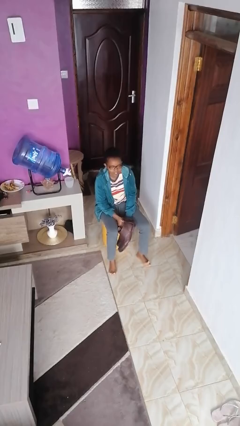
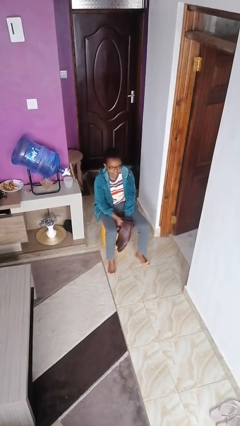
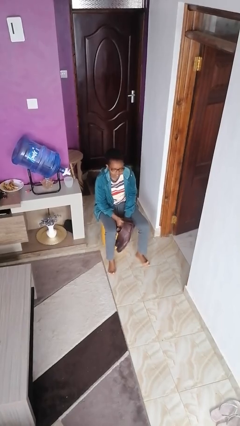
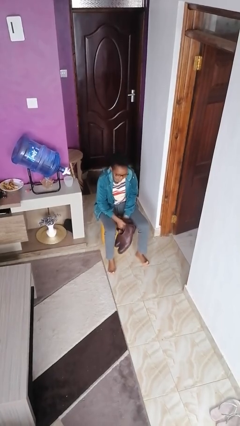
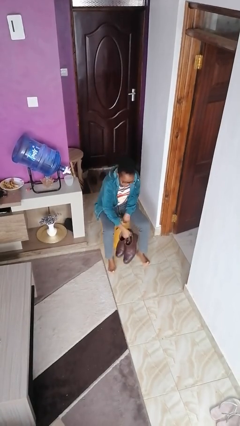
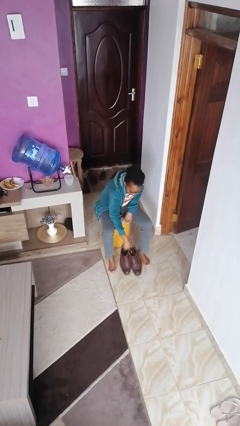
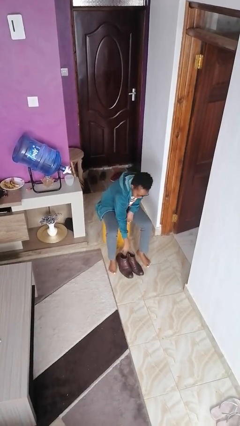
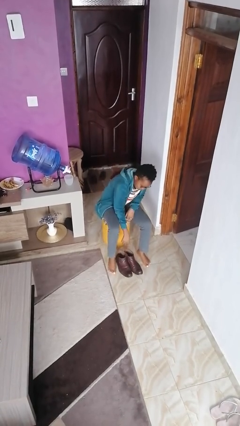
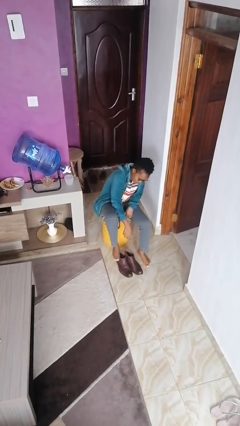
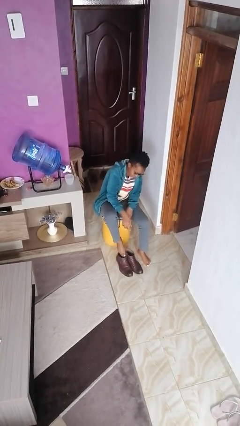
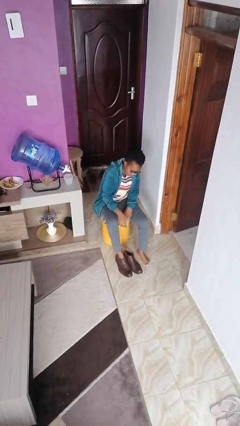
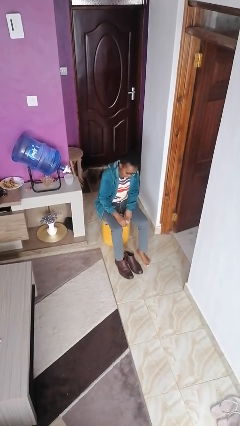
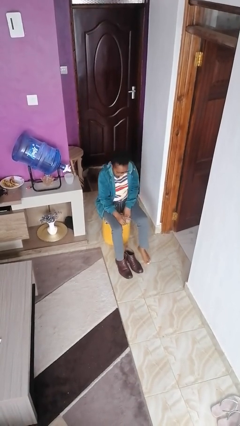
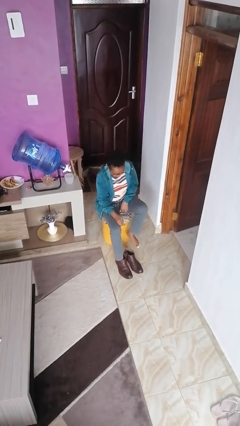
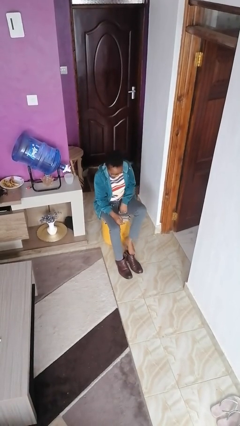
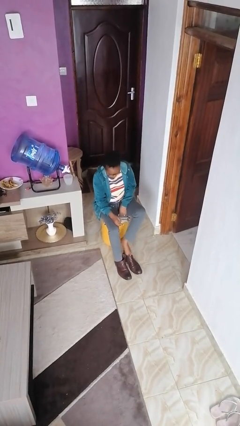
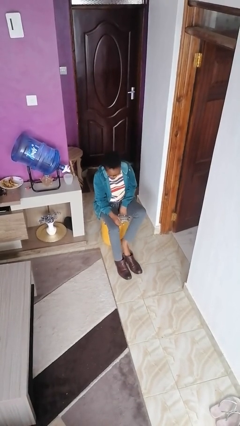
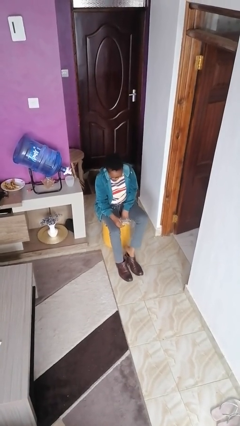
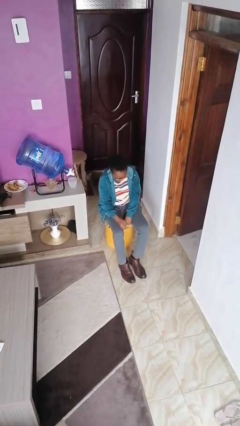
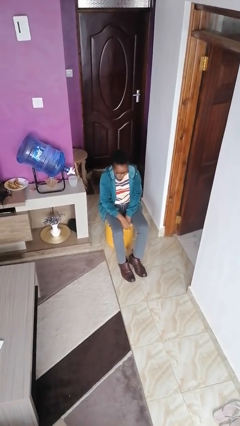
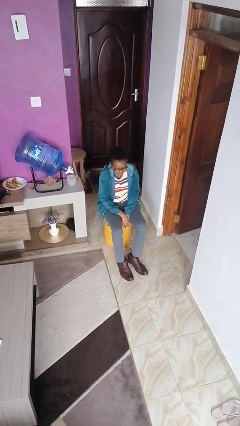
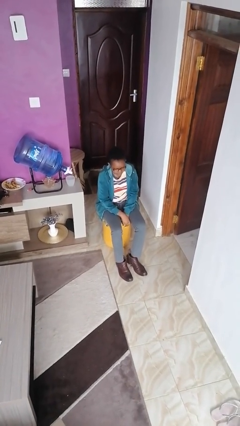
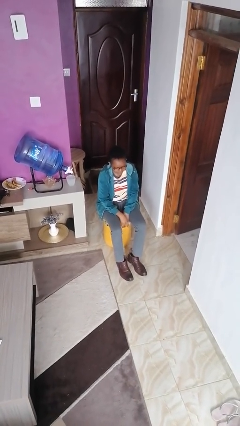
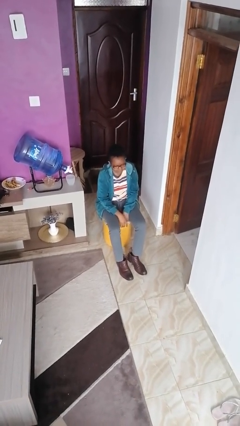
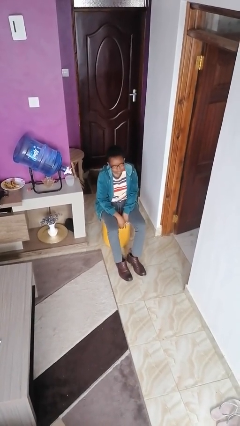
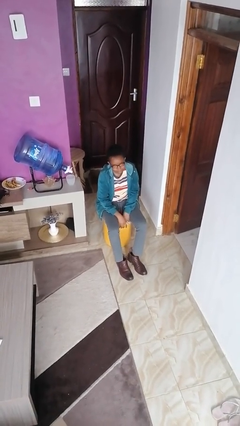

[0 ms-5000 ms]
person puts on boots

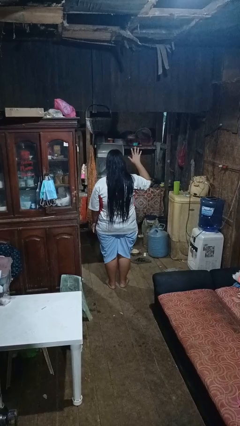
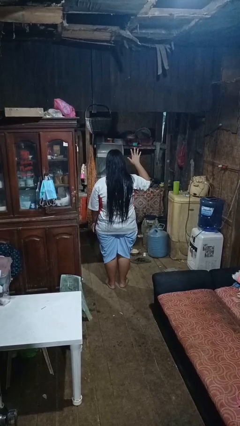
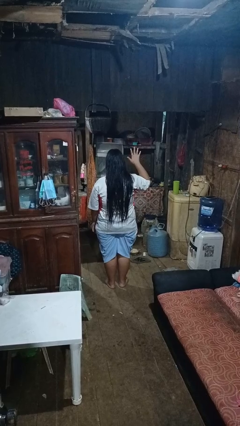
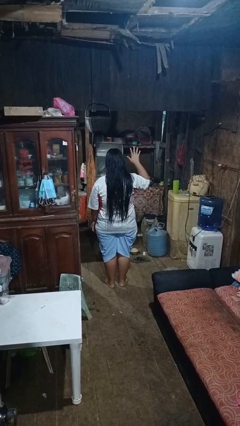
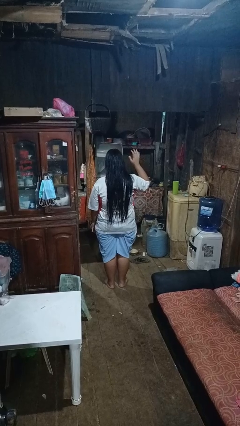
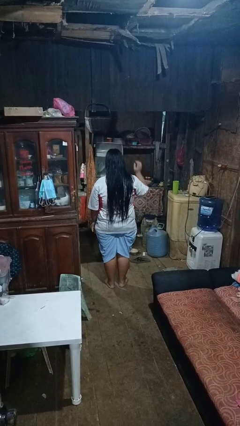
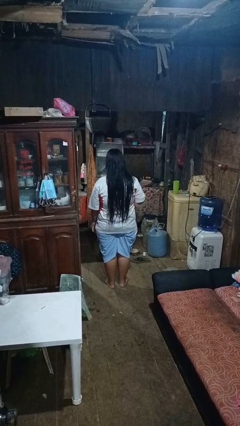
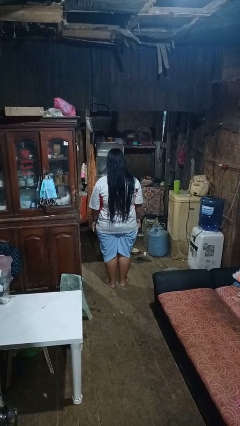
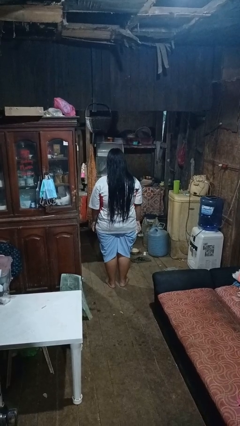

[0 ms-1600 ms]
person gestures number five

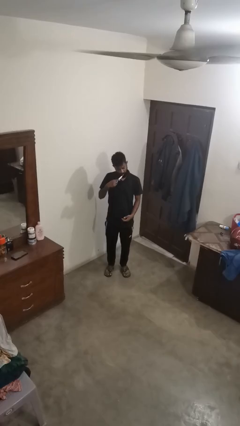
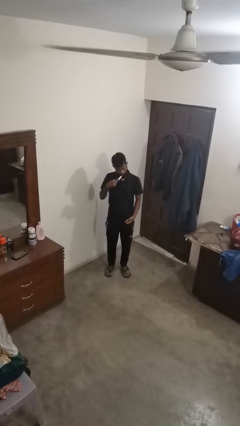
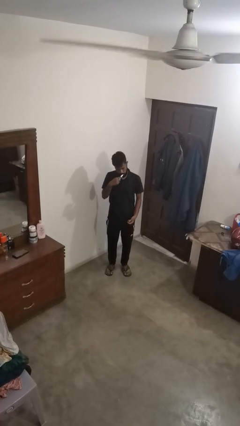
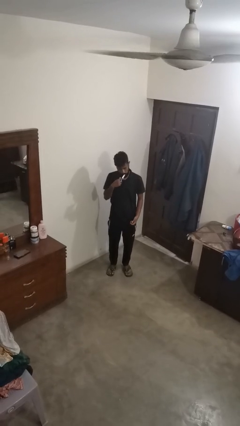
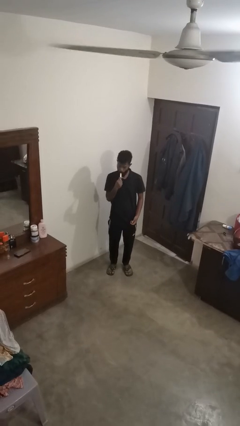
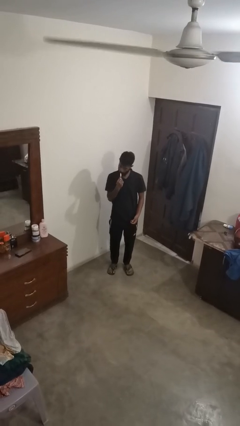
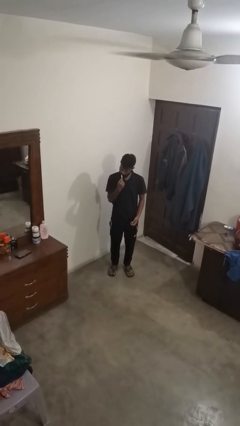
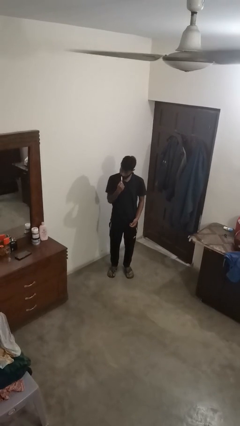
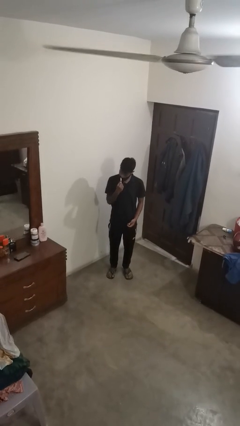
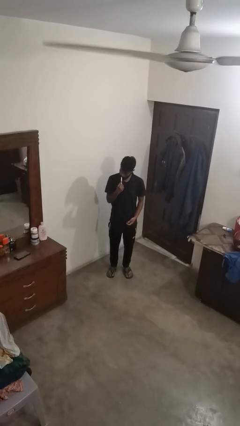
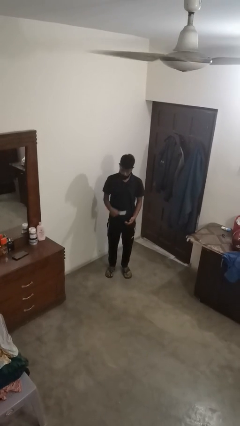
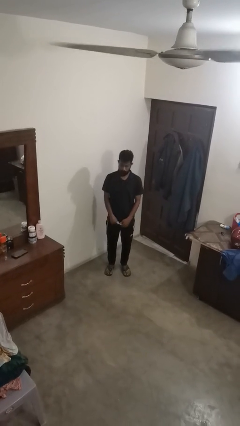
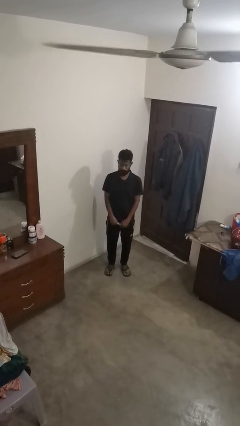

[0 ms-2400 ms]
person brushes teeth

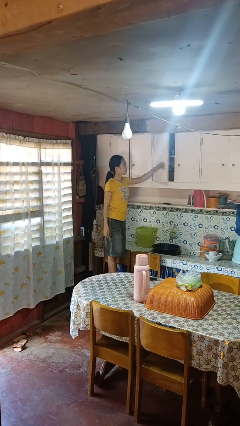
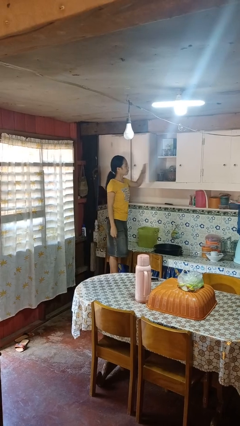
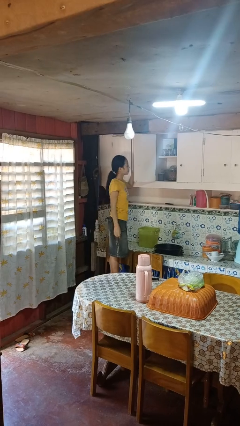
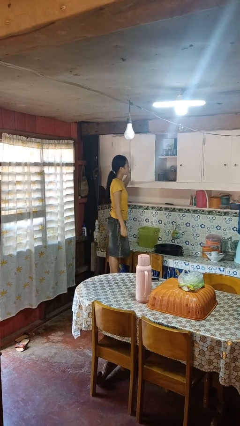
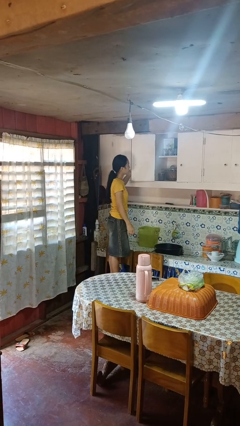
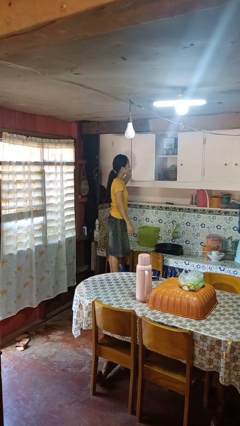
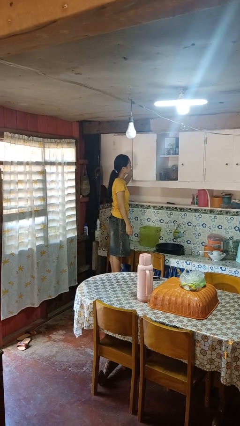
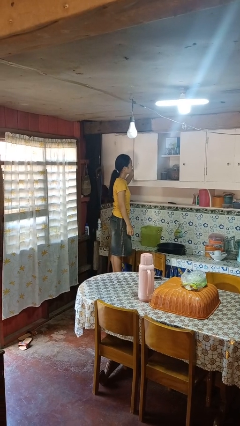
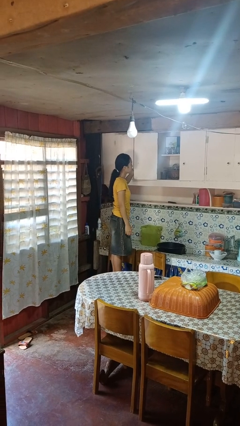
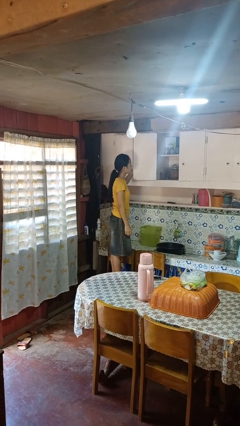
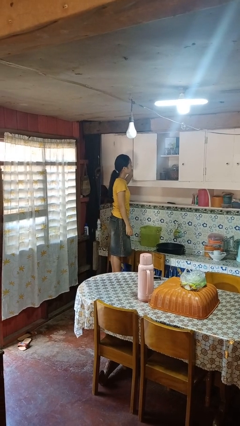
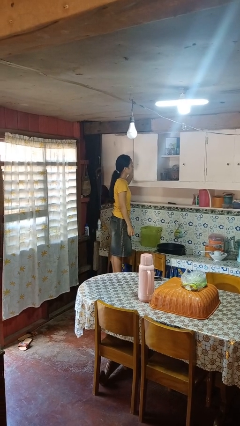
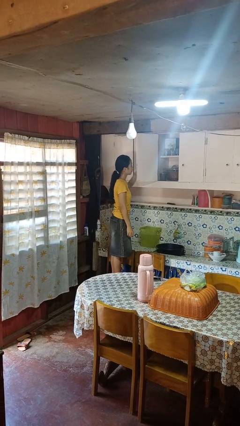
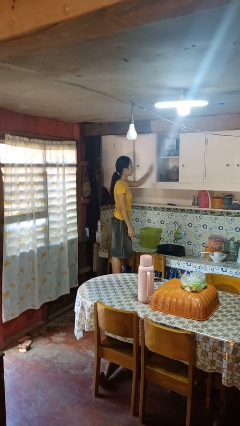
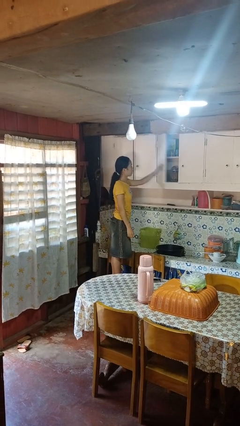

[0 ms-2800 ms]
person opens cabinet

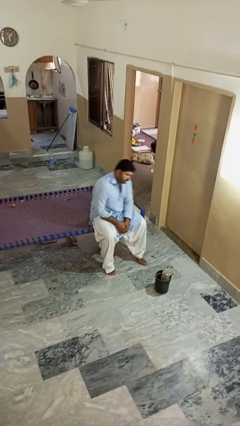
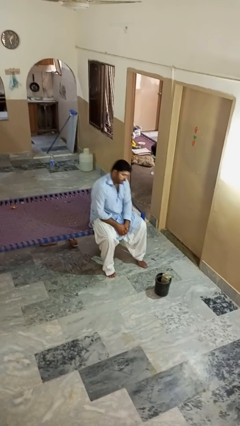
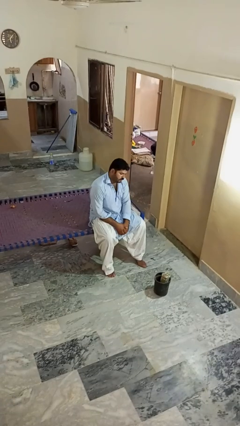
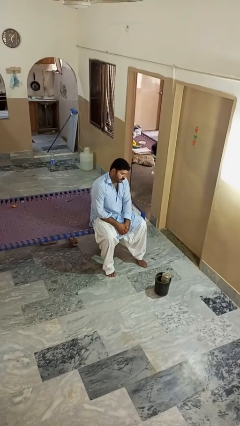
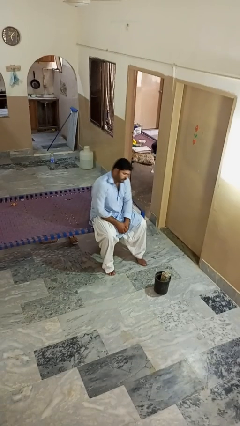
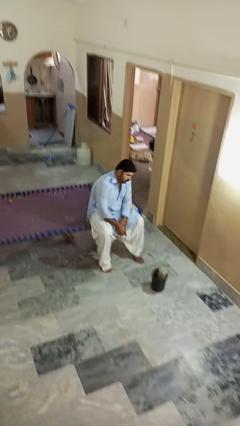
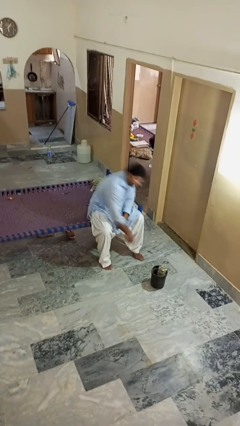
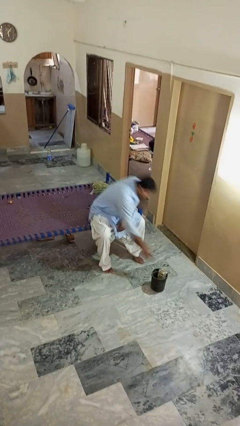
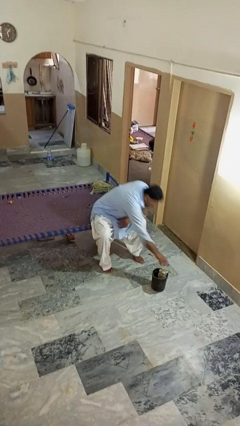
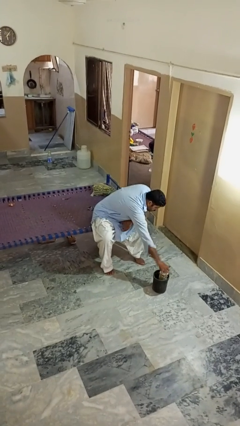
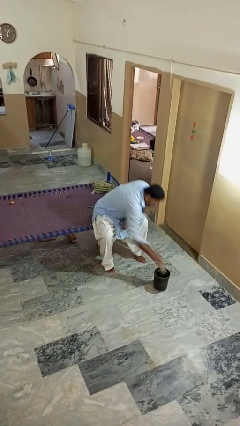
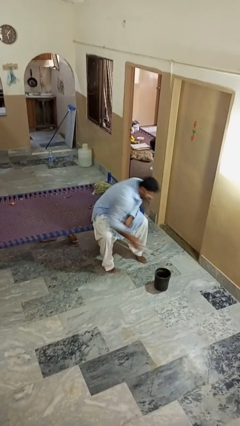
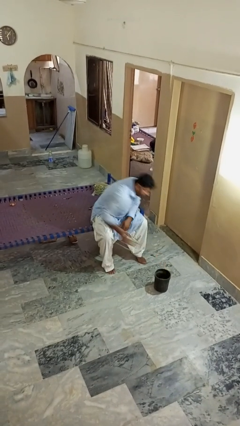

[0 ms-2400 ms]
person takes object from basket

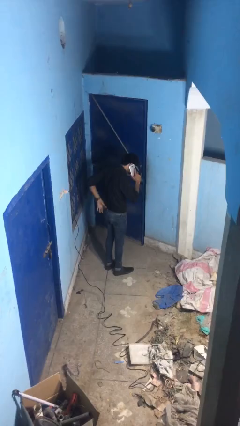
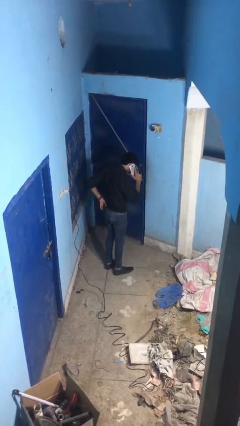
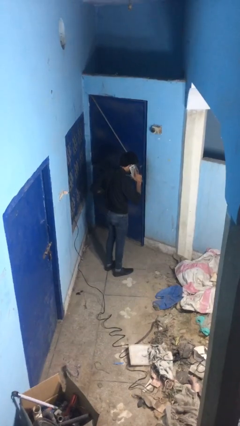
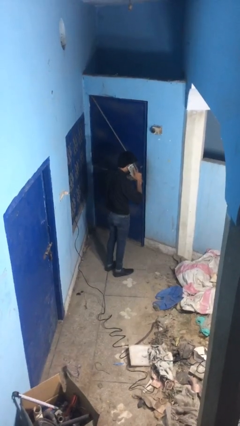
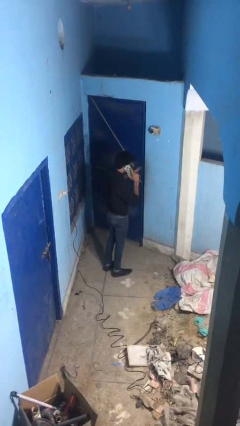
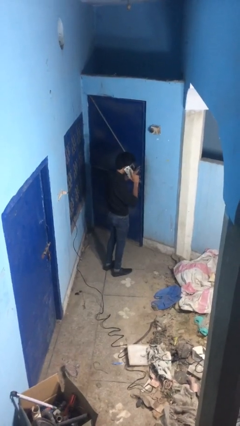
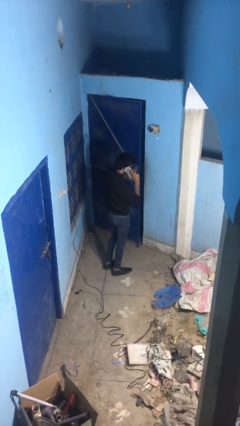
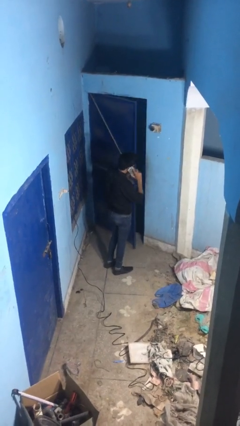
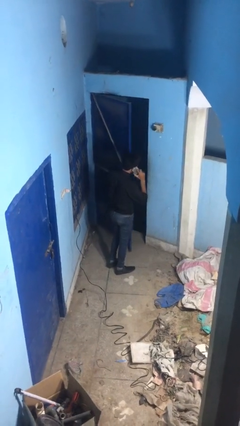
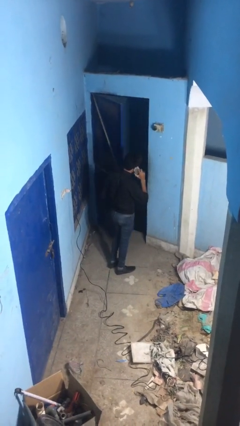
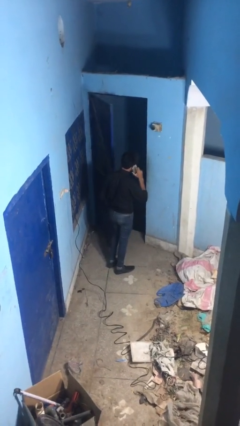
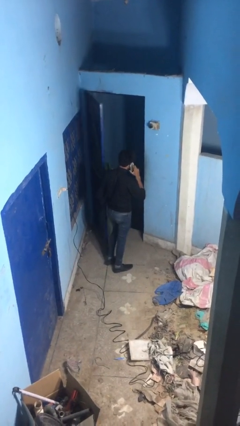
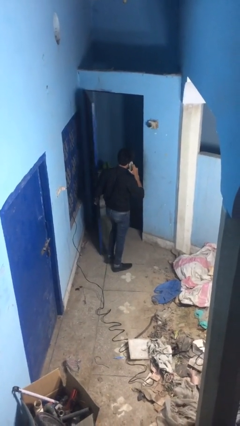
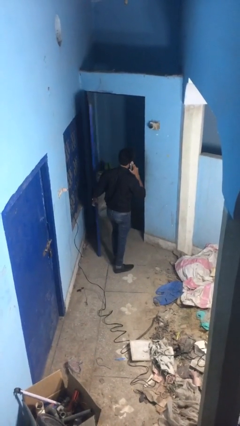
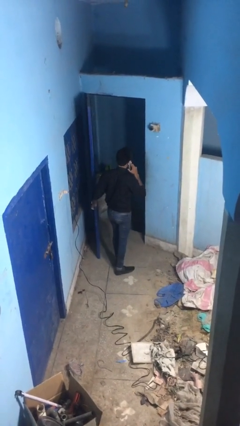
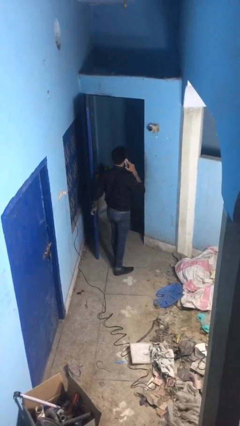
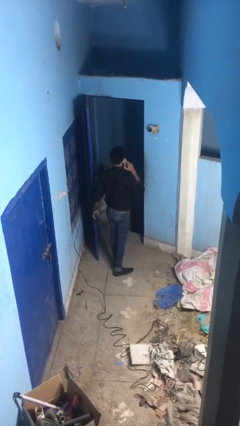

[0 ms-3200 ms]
person opens facility door
